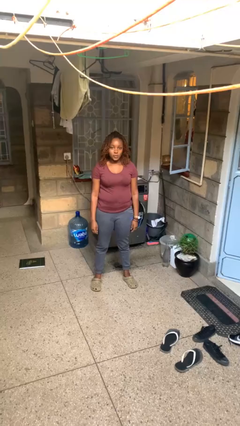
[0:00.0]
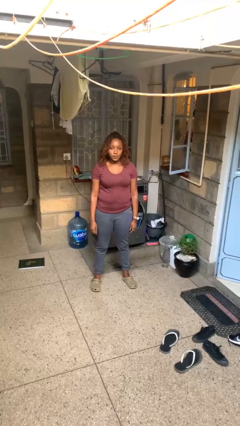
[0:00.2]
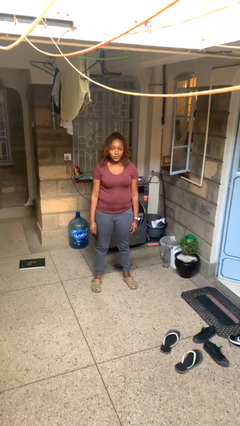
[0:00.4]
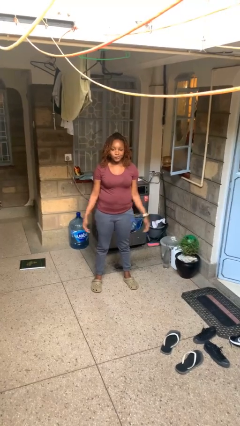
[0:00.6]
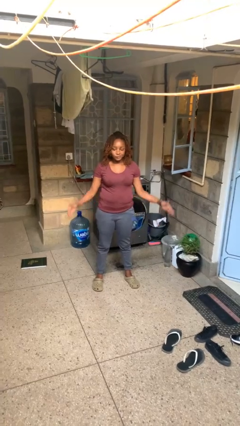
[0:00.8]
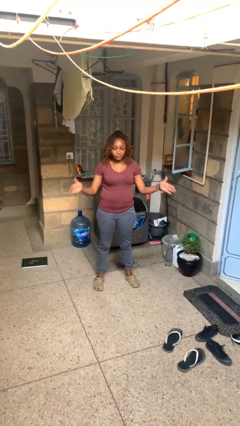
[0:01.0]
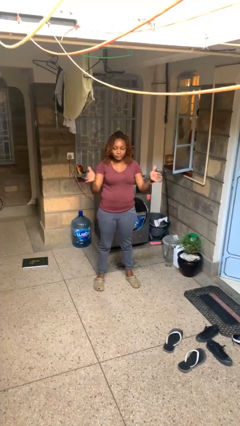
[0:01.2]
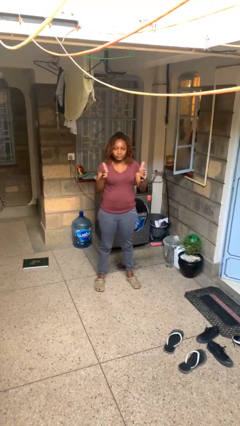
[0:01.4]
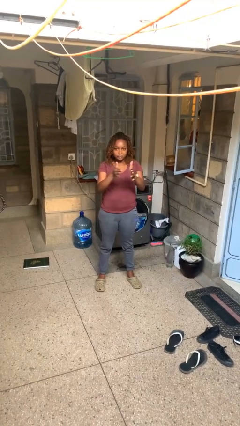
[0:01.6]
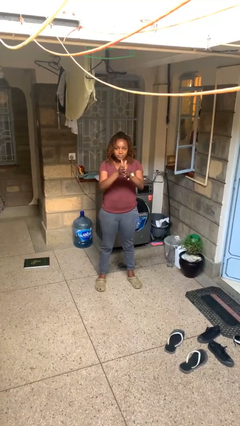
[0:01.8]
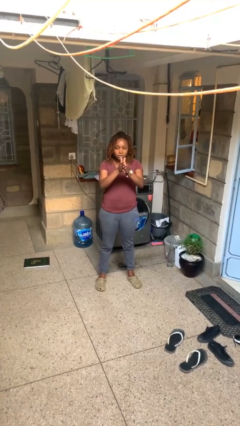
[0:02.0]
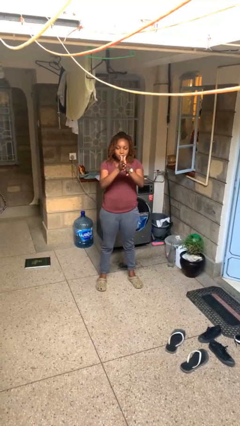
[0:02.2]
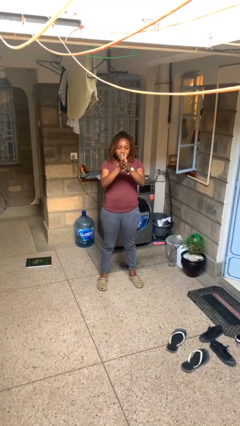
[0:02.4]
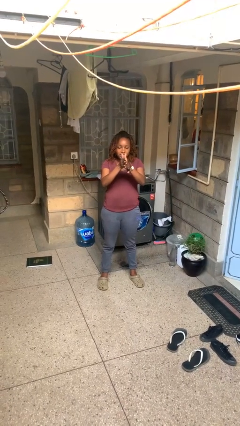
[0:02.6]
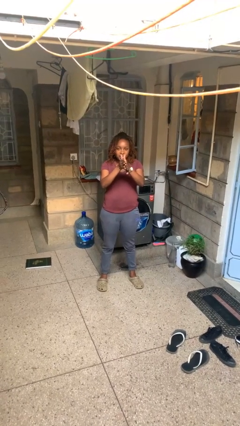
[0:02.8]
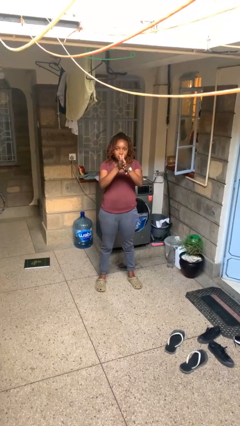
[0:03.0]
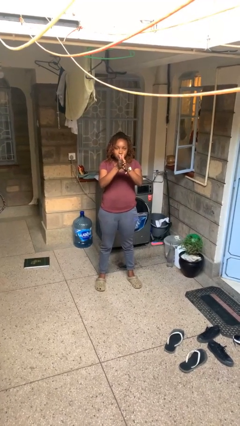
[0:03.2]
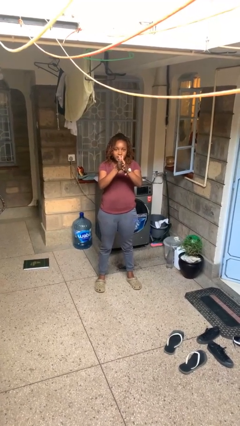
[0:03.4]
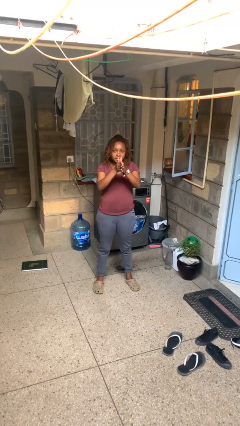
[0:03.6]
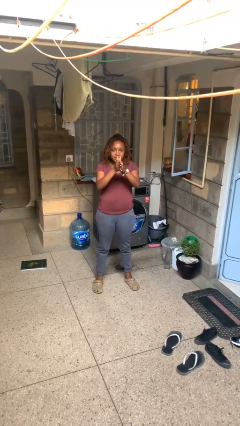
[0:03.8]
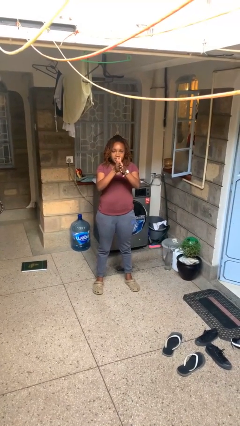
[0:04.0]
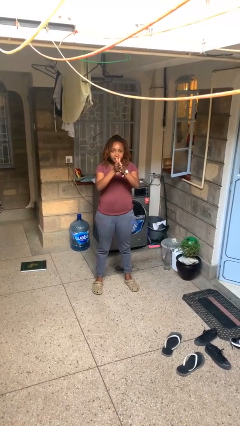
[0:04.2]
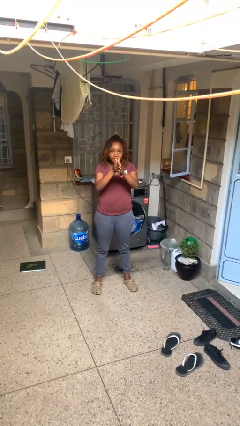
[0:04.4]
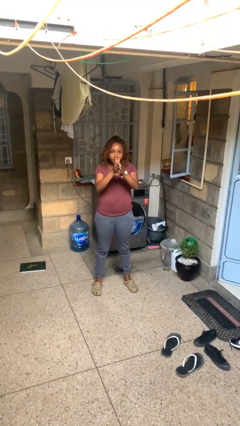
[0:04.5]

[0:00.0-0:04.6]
person gestures zoom in

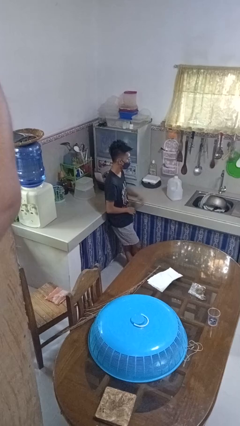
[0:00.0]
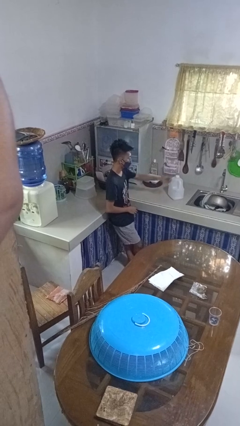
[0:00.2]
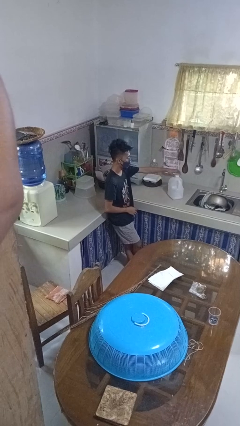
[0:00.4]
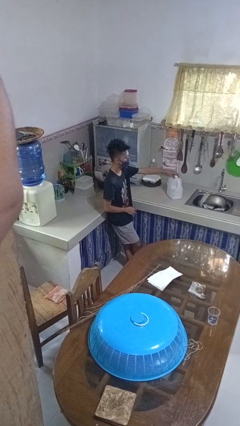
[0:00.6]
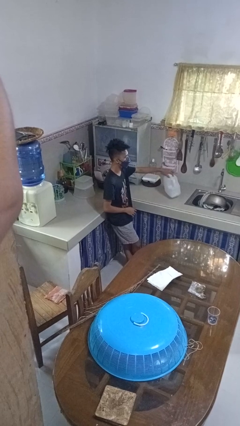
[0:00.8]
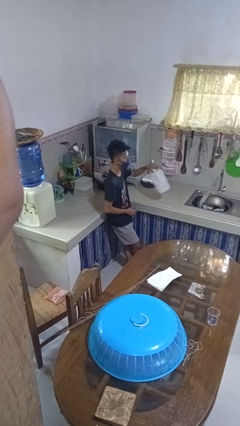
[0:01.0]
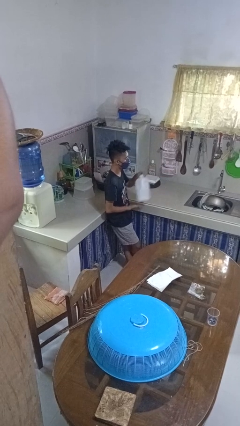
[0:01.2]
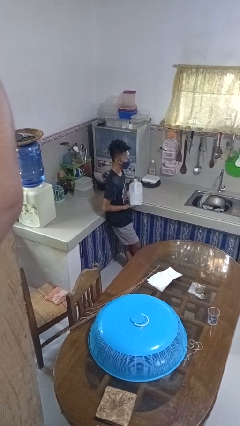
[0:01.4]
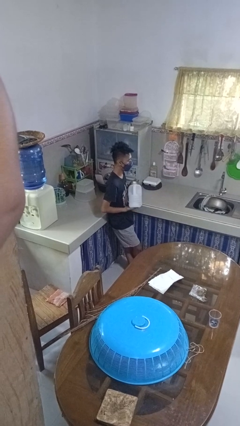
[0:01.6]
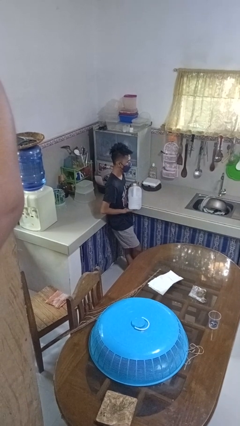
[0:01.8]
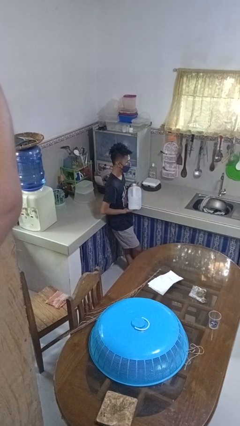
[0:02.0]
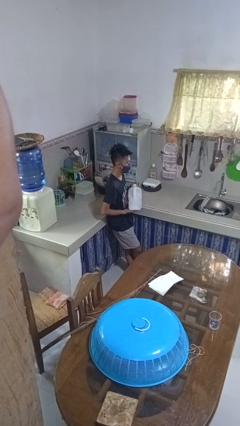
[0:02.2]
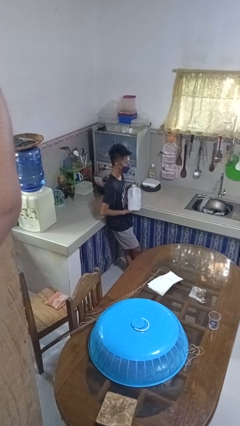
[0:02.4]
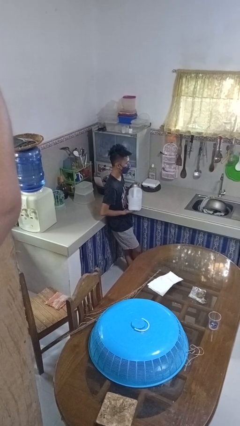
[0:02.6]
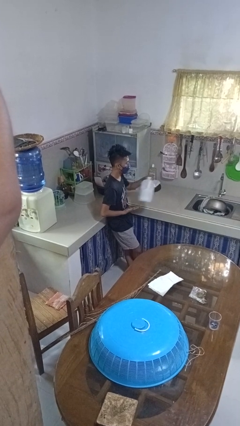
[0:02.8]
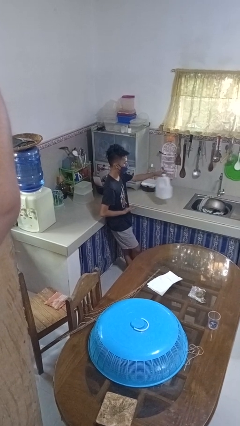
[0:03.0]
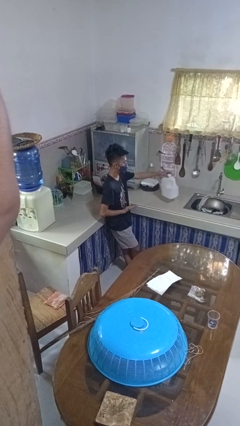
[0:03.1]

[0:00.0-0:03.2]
person picks up object from countertop

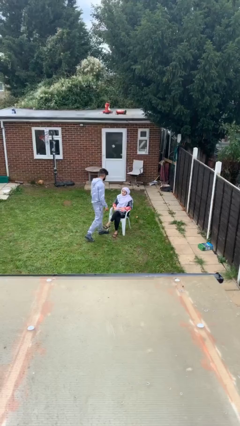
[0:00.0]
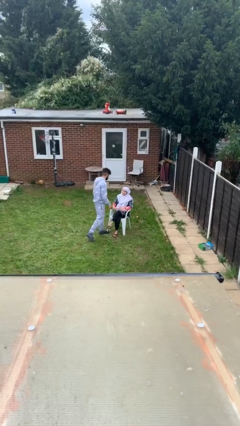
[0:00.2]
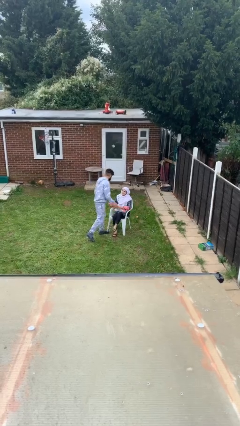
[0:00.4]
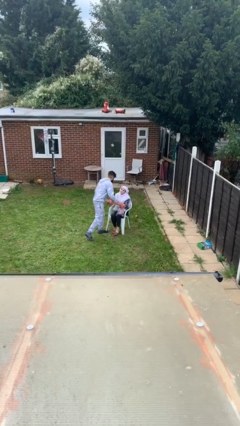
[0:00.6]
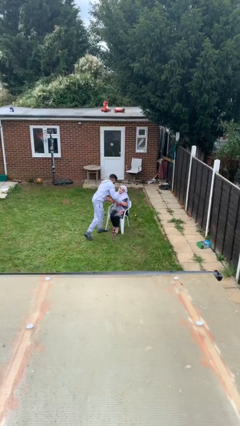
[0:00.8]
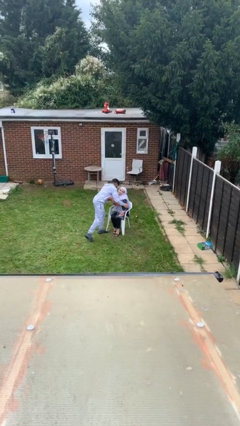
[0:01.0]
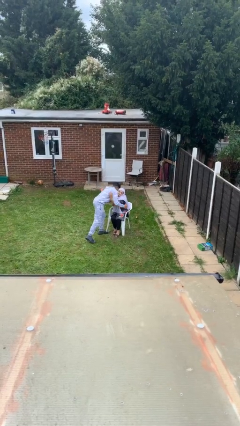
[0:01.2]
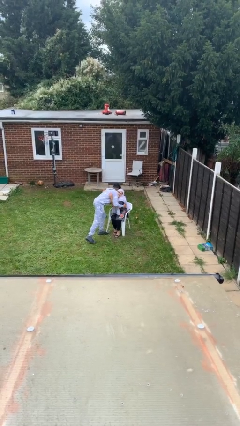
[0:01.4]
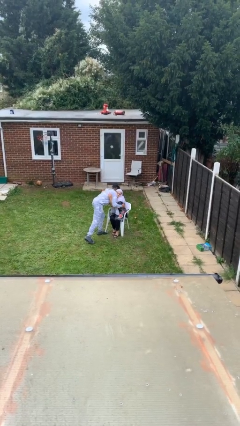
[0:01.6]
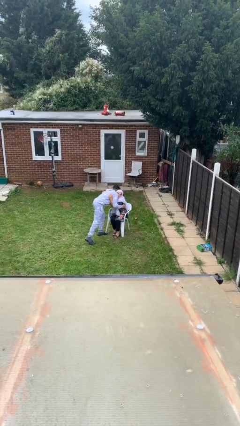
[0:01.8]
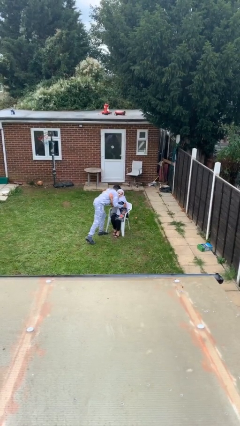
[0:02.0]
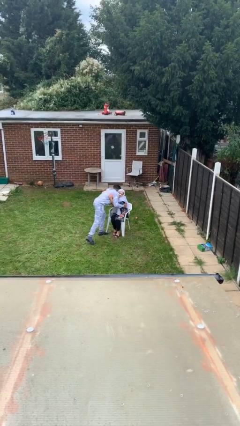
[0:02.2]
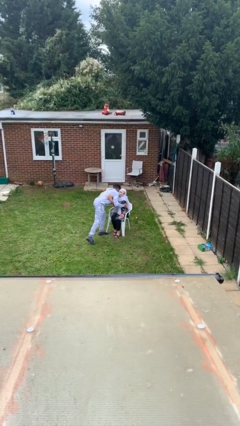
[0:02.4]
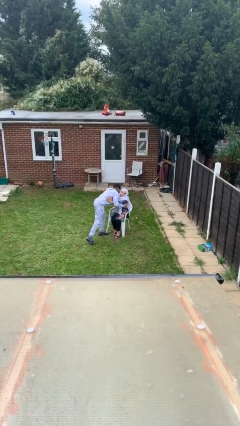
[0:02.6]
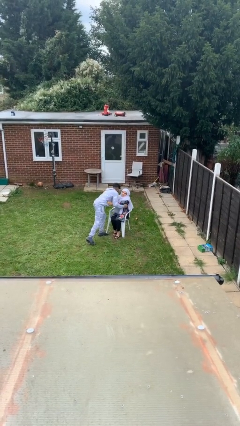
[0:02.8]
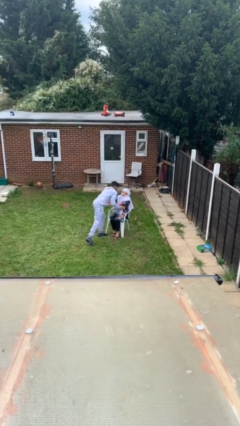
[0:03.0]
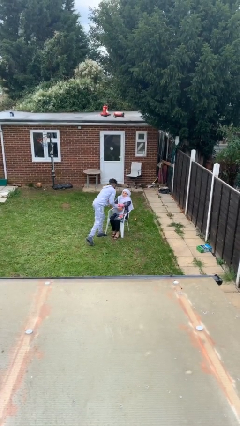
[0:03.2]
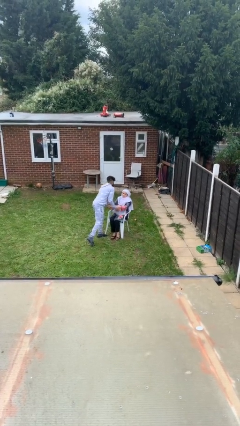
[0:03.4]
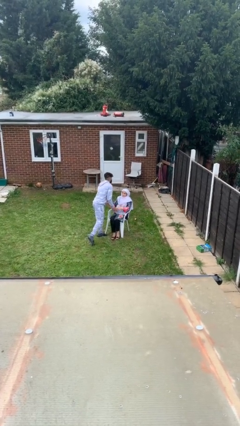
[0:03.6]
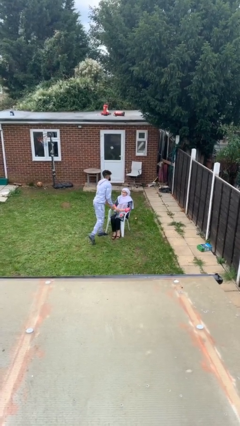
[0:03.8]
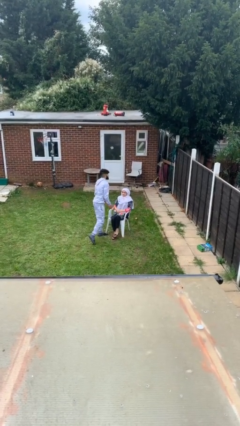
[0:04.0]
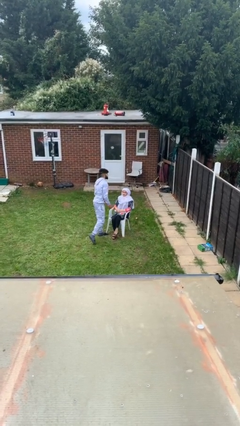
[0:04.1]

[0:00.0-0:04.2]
person embraces person

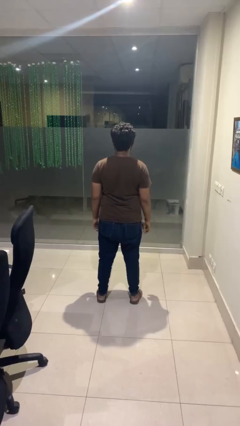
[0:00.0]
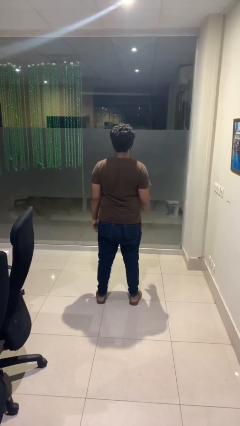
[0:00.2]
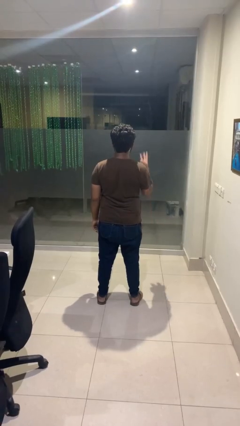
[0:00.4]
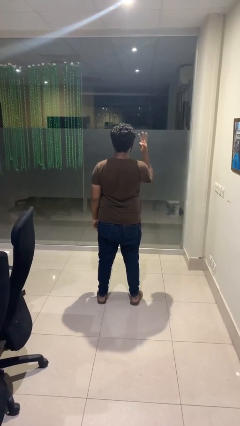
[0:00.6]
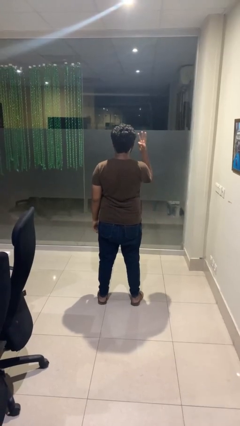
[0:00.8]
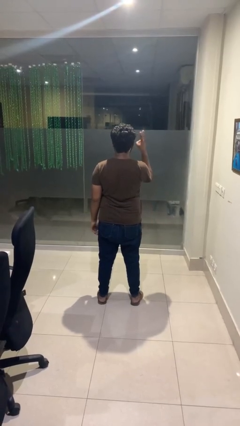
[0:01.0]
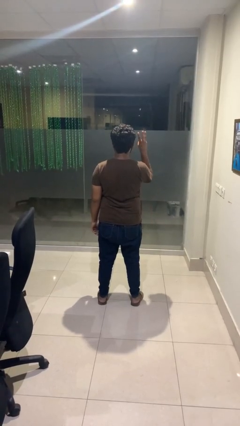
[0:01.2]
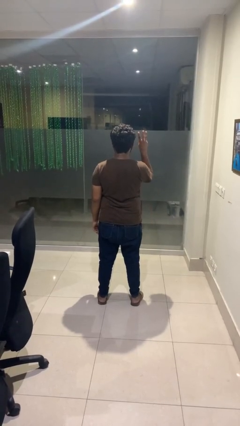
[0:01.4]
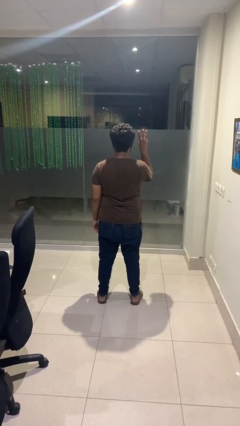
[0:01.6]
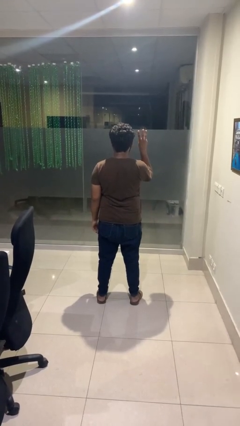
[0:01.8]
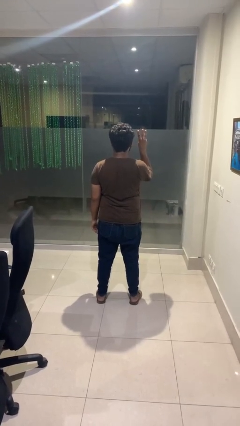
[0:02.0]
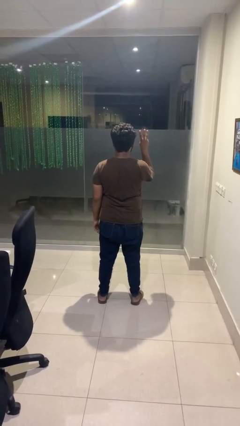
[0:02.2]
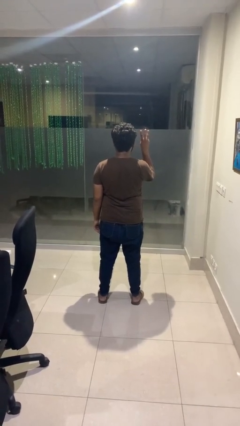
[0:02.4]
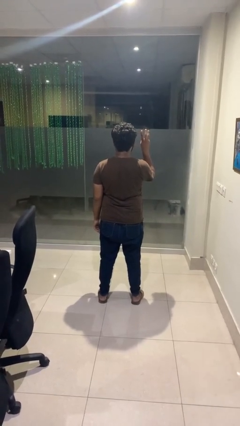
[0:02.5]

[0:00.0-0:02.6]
person gestures number three

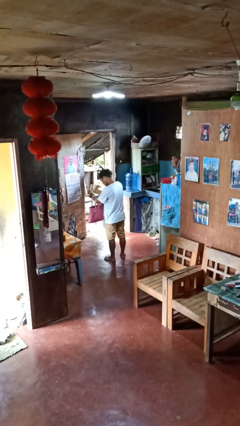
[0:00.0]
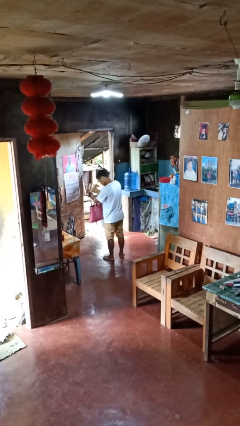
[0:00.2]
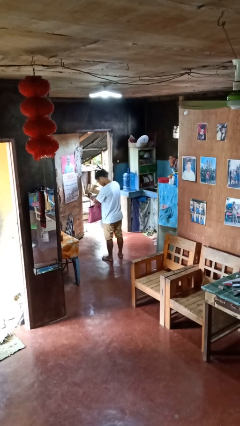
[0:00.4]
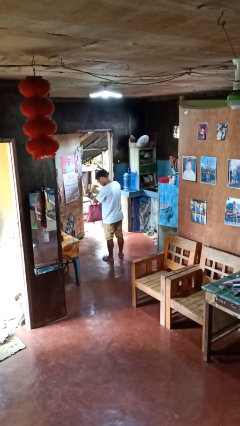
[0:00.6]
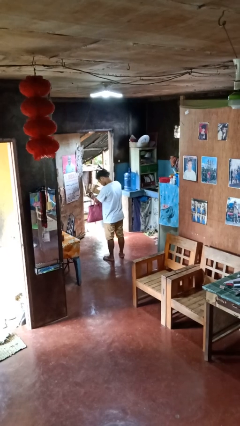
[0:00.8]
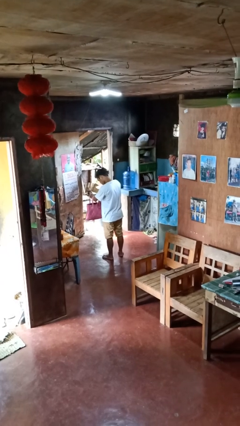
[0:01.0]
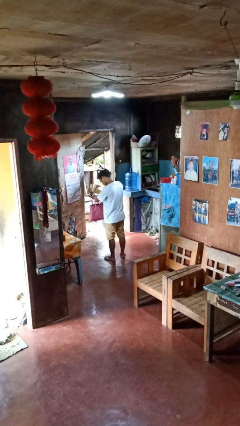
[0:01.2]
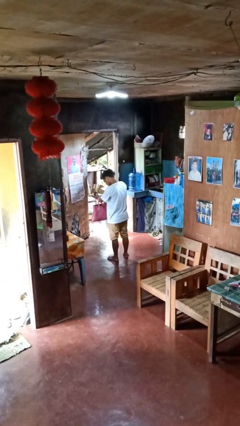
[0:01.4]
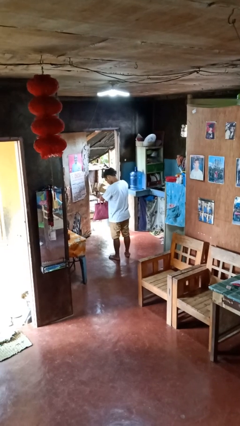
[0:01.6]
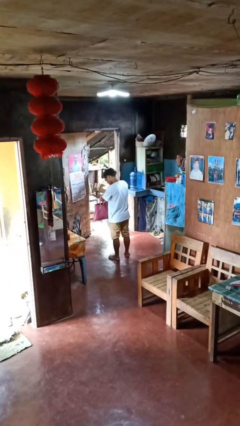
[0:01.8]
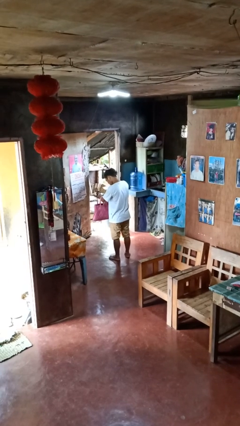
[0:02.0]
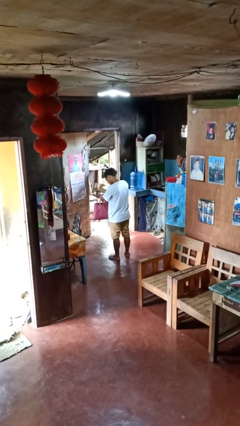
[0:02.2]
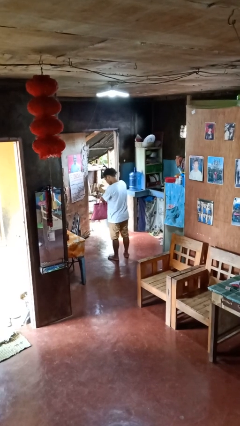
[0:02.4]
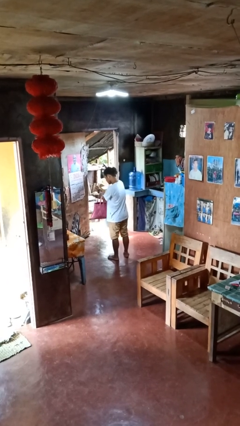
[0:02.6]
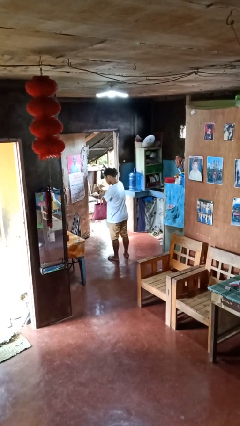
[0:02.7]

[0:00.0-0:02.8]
person searches in purse

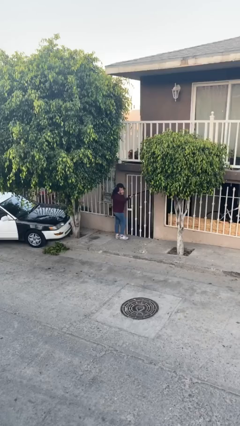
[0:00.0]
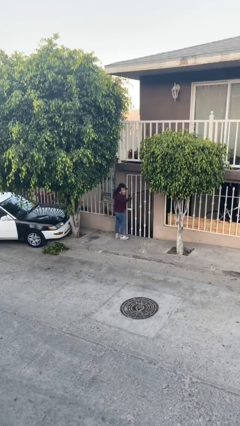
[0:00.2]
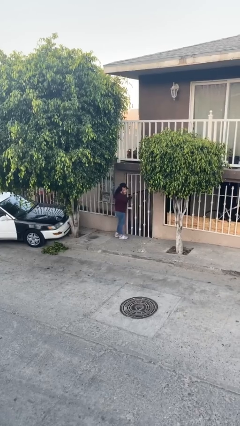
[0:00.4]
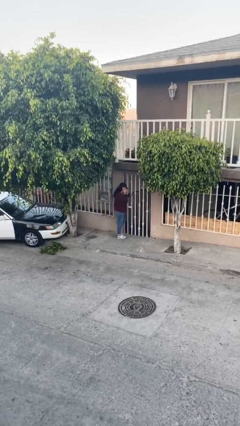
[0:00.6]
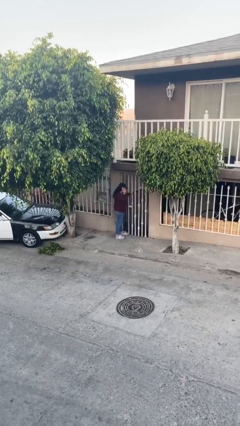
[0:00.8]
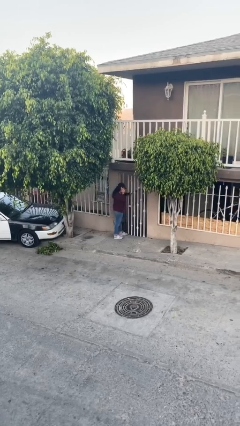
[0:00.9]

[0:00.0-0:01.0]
person opens facility door
